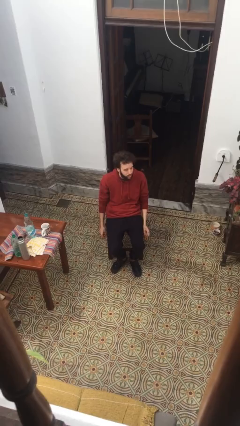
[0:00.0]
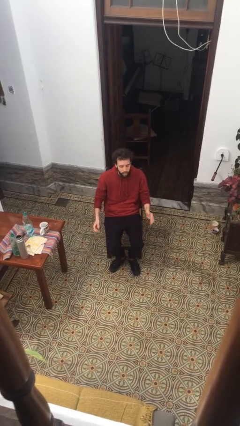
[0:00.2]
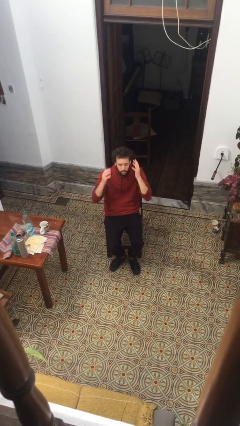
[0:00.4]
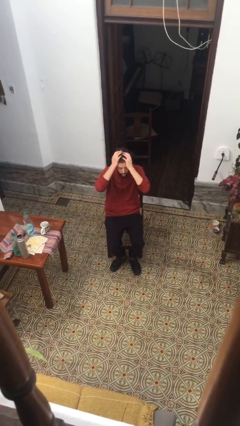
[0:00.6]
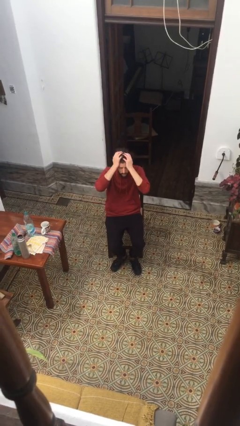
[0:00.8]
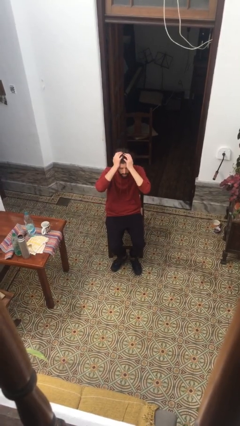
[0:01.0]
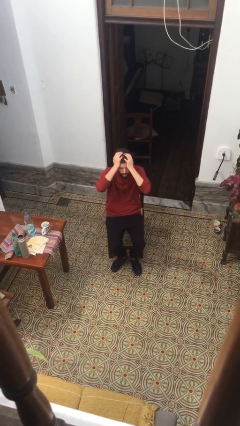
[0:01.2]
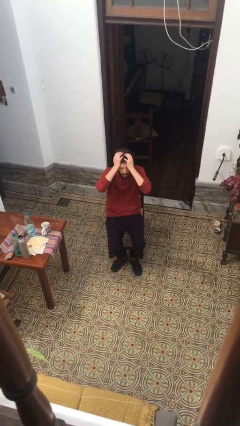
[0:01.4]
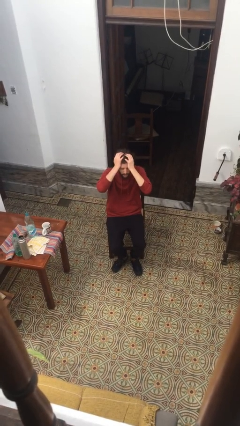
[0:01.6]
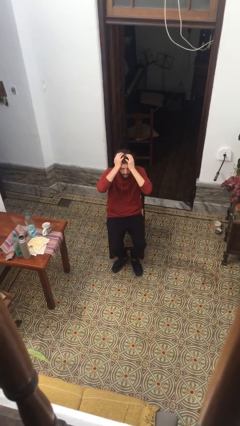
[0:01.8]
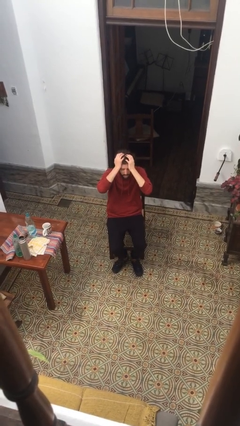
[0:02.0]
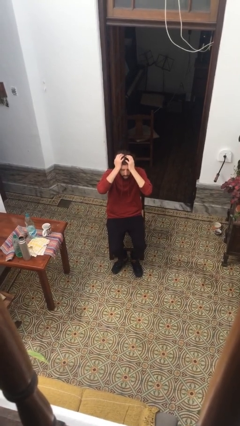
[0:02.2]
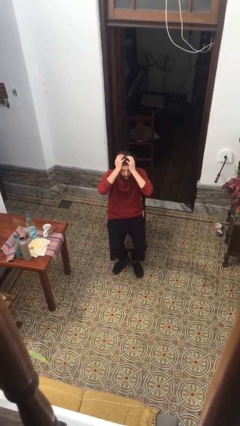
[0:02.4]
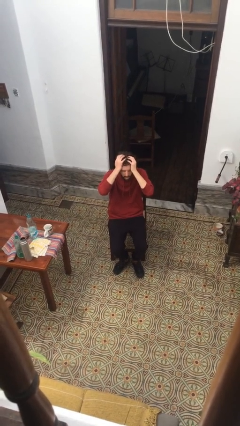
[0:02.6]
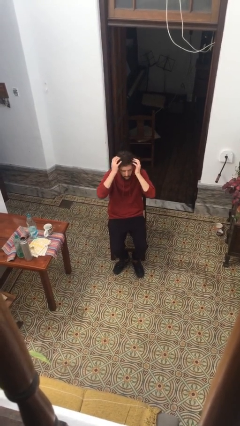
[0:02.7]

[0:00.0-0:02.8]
person covers face with hands

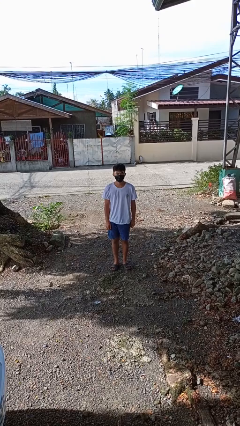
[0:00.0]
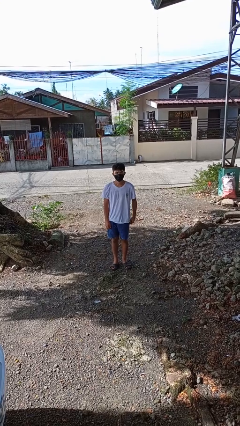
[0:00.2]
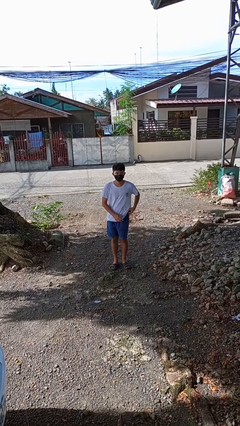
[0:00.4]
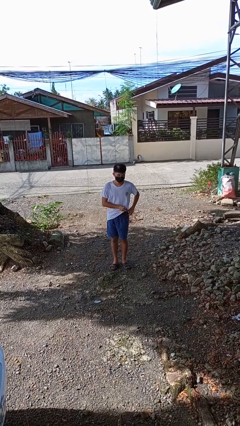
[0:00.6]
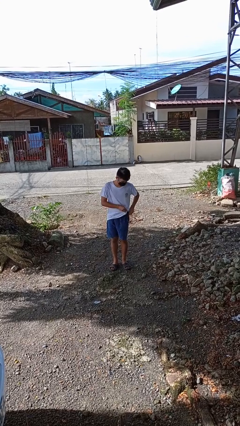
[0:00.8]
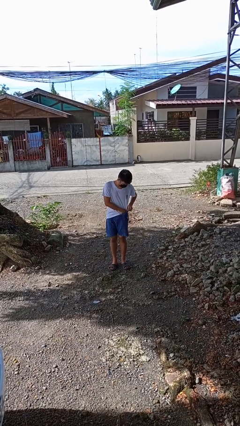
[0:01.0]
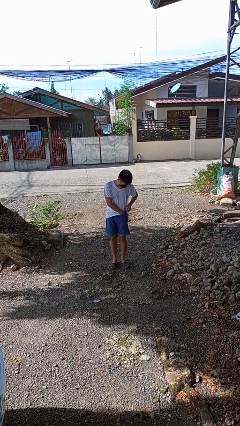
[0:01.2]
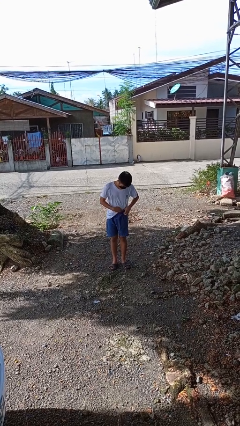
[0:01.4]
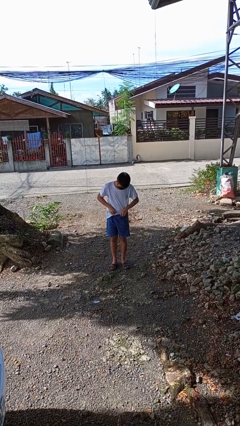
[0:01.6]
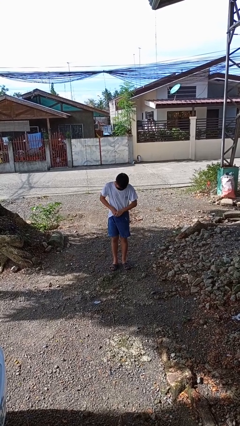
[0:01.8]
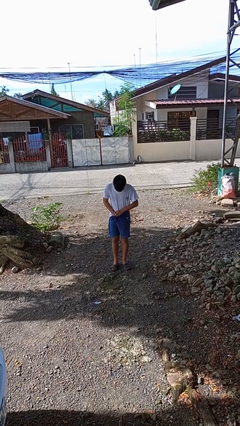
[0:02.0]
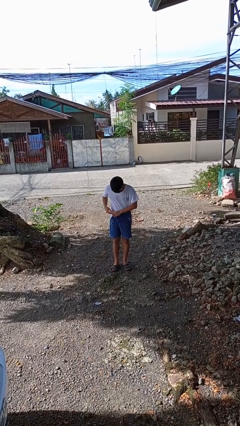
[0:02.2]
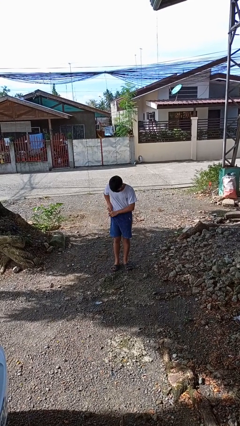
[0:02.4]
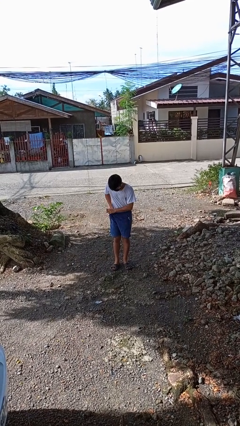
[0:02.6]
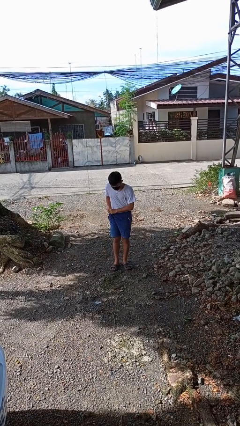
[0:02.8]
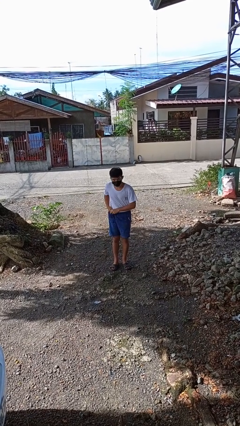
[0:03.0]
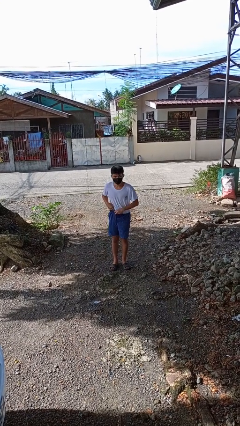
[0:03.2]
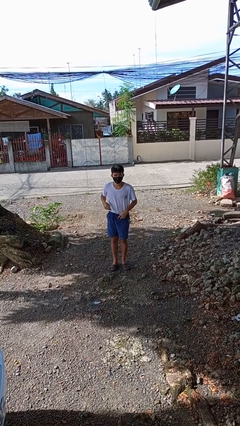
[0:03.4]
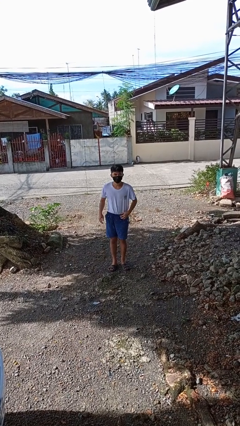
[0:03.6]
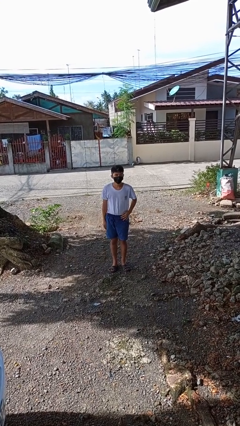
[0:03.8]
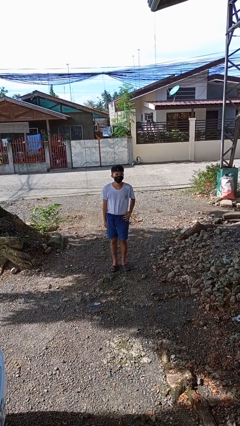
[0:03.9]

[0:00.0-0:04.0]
person tucks in shirt

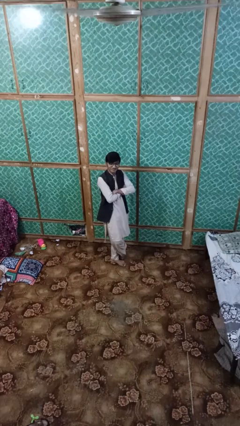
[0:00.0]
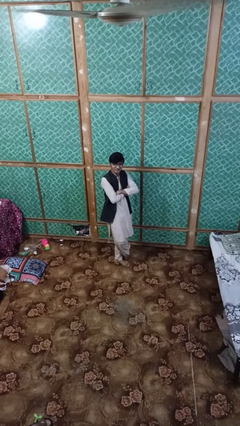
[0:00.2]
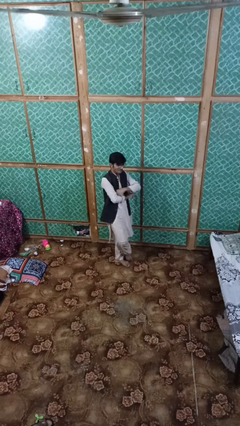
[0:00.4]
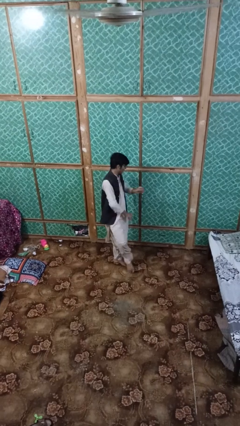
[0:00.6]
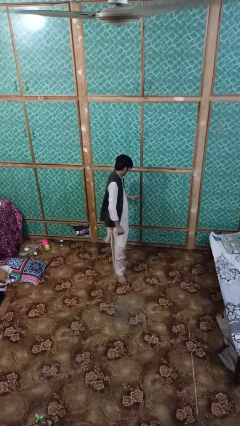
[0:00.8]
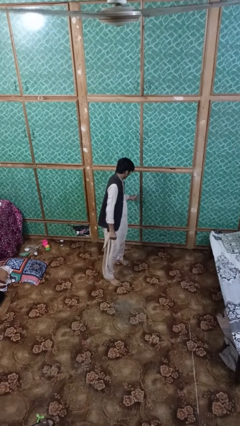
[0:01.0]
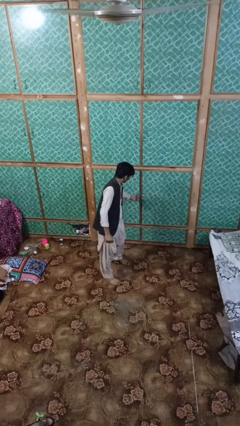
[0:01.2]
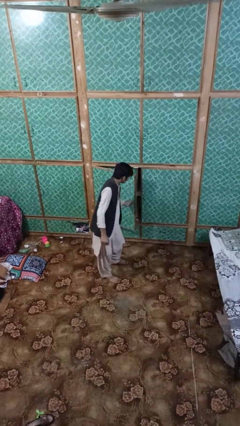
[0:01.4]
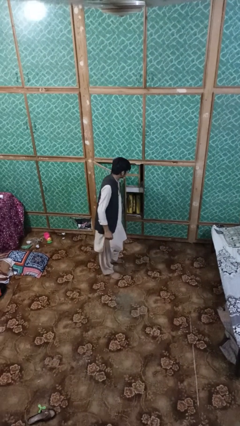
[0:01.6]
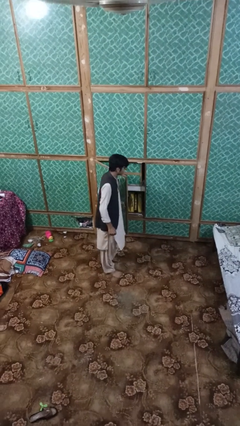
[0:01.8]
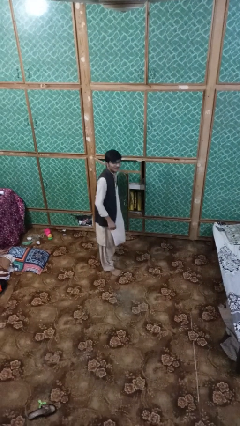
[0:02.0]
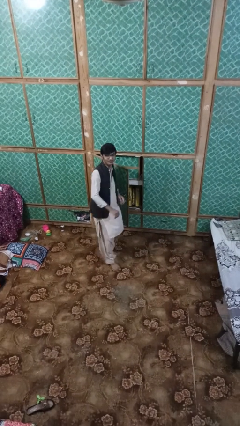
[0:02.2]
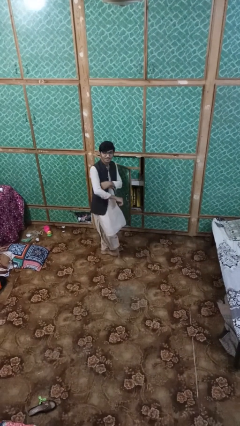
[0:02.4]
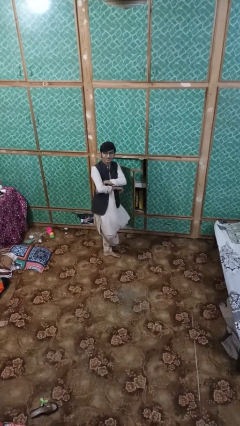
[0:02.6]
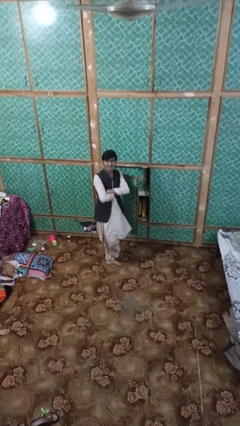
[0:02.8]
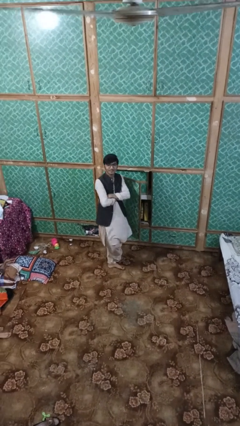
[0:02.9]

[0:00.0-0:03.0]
person opens dresser drawer

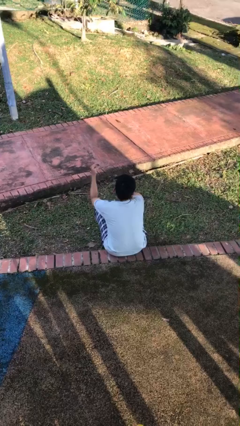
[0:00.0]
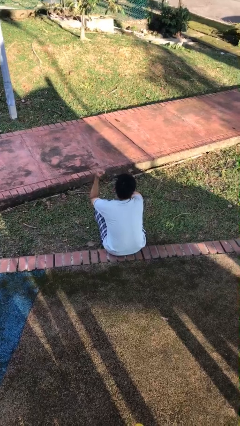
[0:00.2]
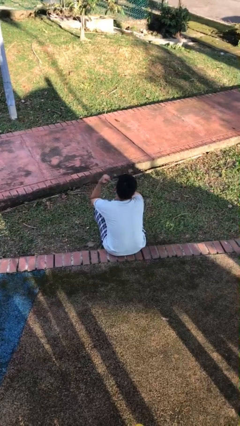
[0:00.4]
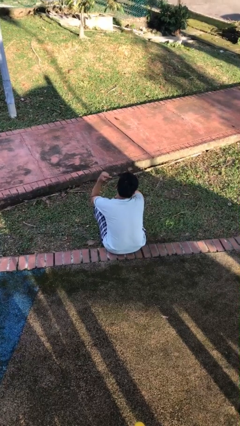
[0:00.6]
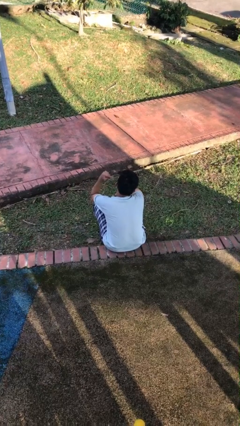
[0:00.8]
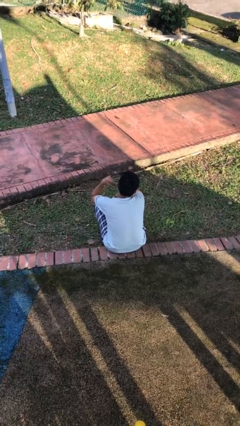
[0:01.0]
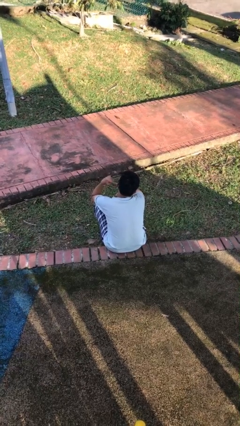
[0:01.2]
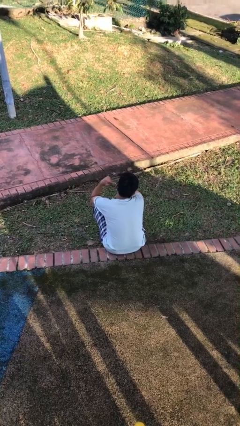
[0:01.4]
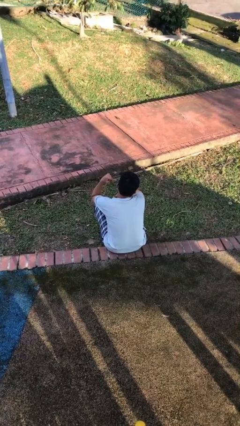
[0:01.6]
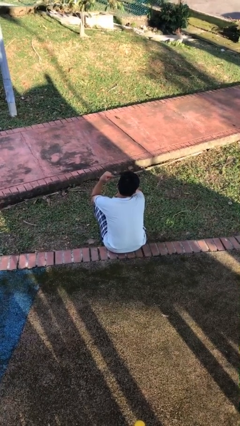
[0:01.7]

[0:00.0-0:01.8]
person gestures listen closely

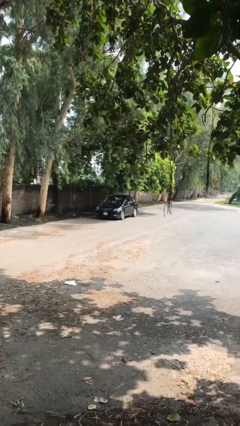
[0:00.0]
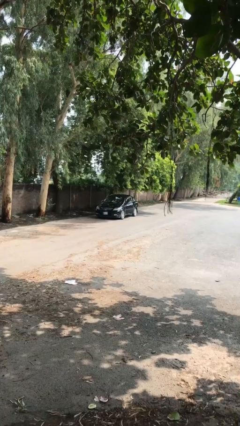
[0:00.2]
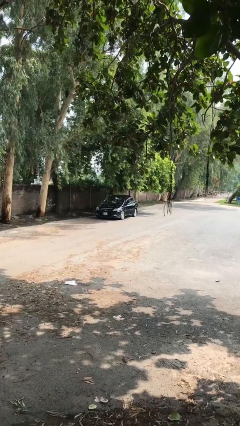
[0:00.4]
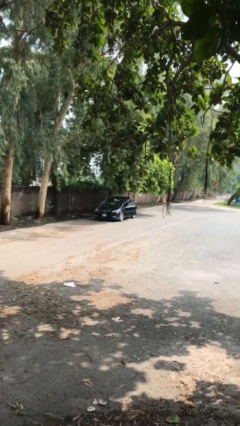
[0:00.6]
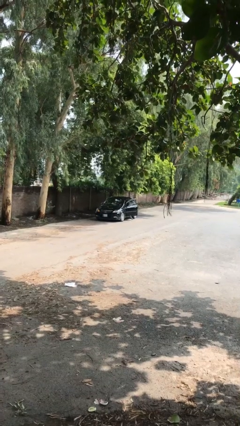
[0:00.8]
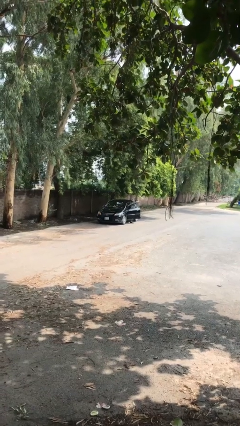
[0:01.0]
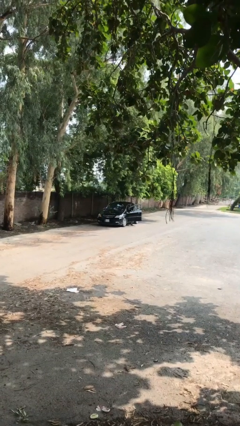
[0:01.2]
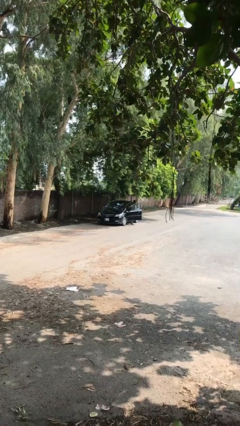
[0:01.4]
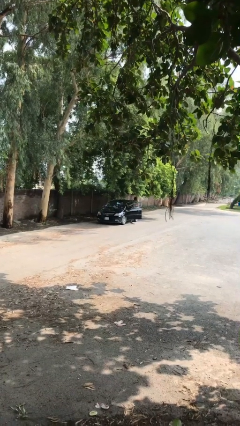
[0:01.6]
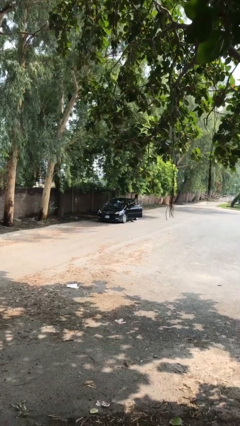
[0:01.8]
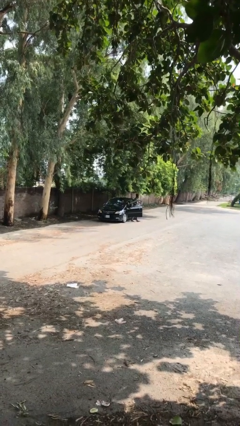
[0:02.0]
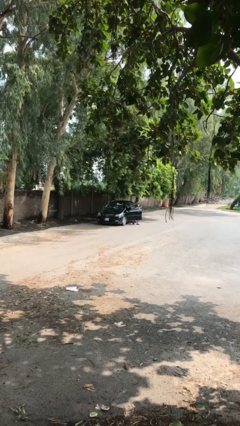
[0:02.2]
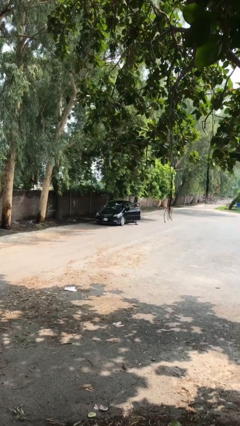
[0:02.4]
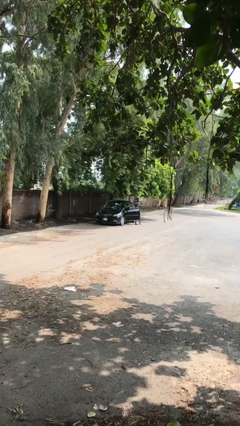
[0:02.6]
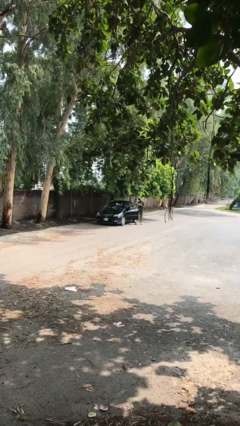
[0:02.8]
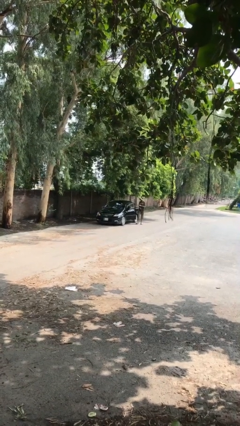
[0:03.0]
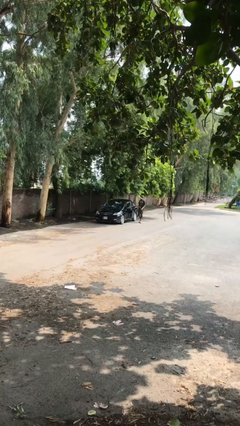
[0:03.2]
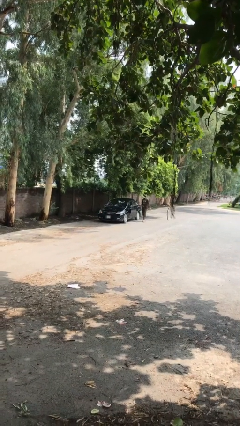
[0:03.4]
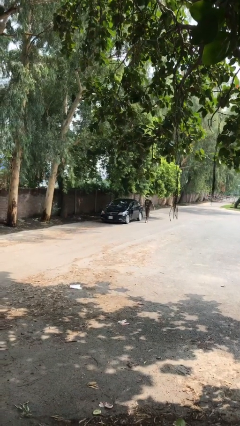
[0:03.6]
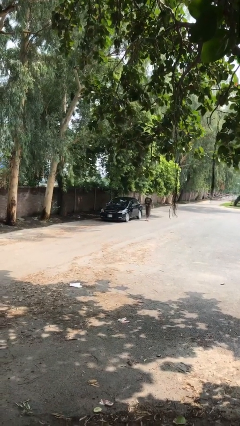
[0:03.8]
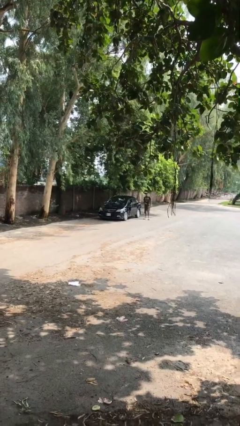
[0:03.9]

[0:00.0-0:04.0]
car drops off person

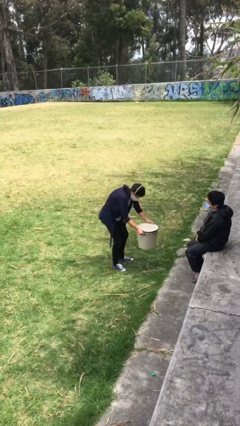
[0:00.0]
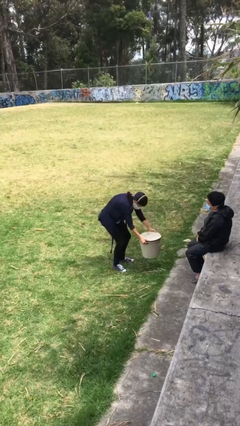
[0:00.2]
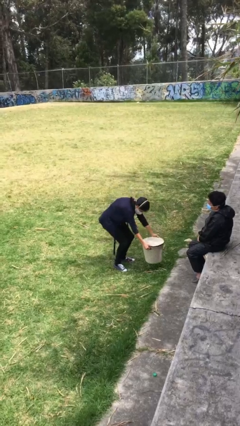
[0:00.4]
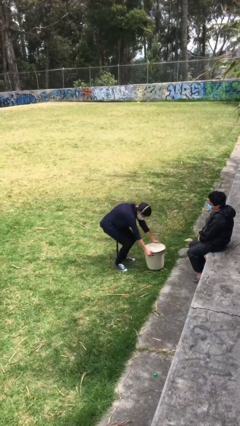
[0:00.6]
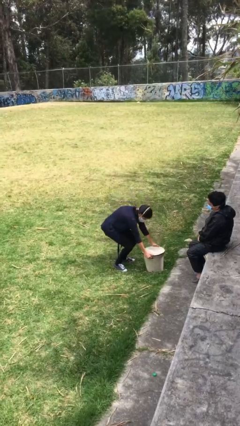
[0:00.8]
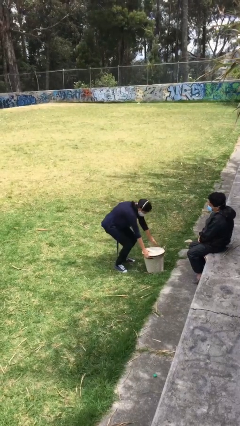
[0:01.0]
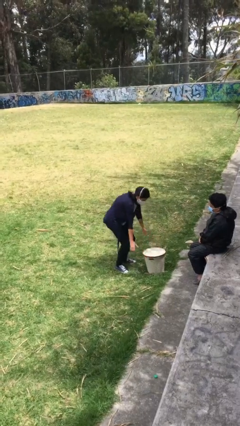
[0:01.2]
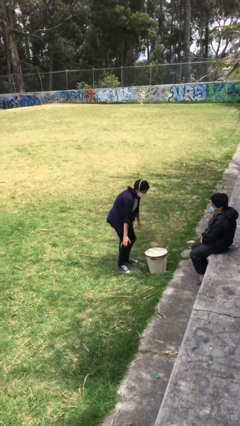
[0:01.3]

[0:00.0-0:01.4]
person puts down object on floor

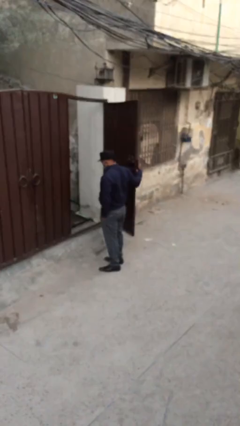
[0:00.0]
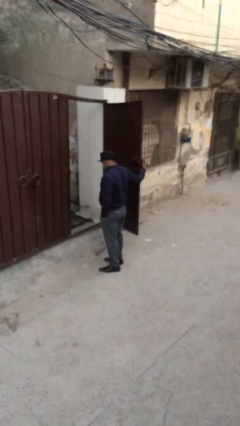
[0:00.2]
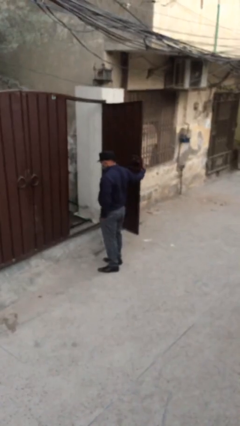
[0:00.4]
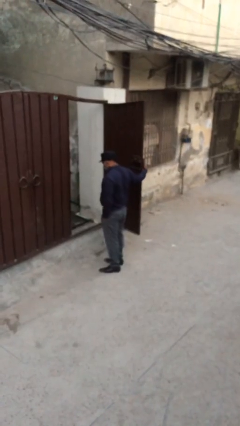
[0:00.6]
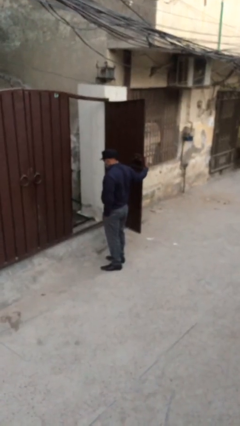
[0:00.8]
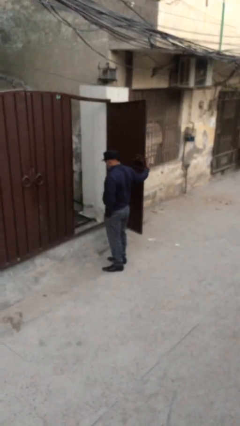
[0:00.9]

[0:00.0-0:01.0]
person opens facility door
